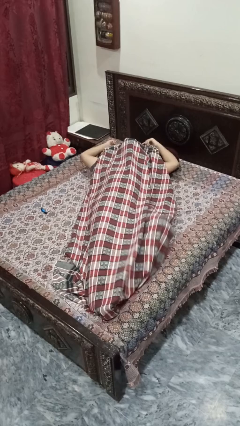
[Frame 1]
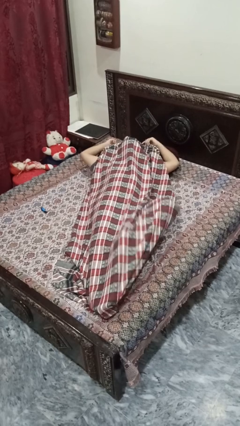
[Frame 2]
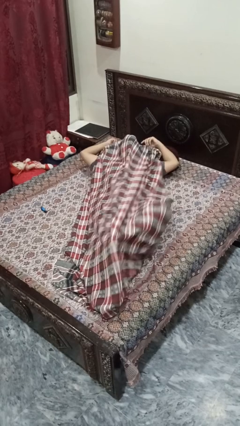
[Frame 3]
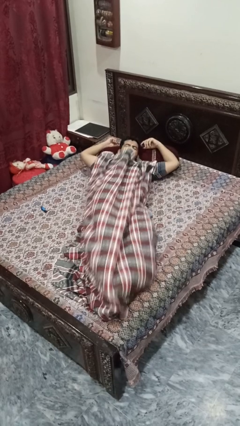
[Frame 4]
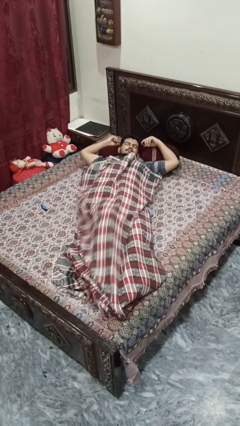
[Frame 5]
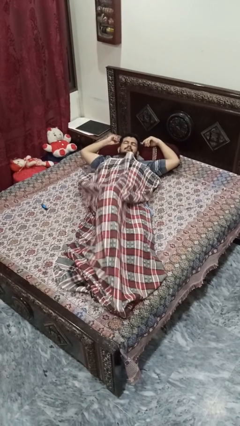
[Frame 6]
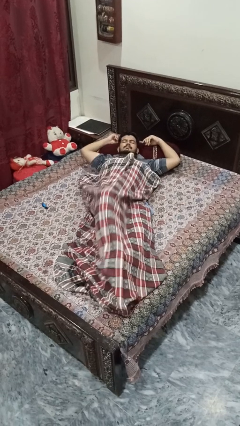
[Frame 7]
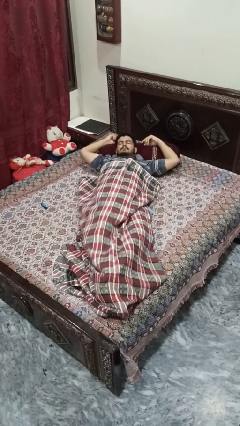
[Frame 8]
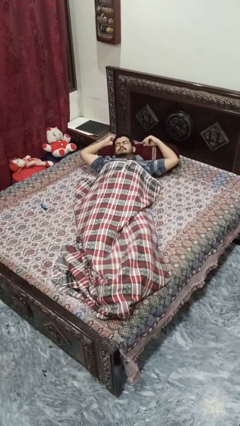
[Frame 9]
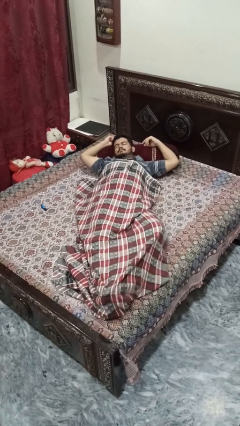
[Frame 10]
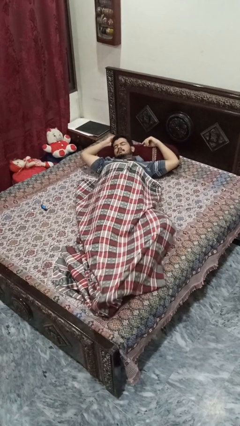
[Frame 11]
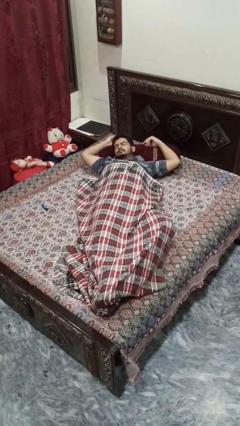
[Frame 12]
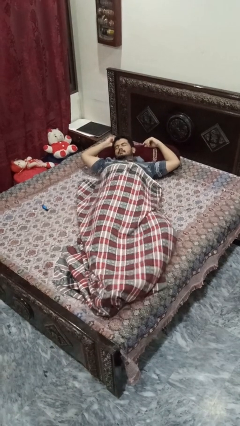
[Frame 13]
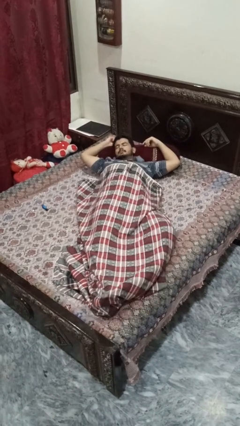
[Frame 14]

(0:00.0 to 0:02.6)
person uncovers with bedsheets

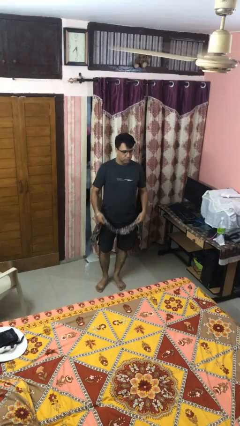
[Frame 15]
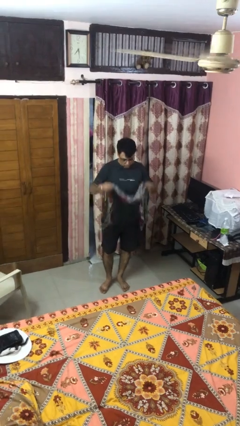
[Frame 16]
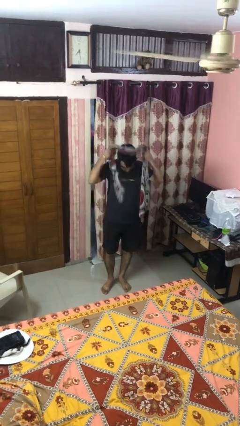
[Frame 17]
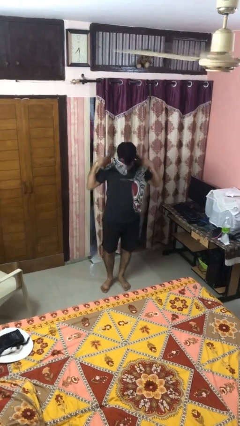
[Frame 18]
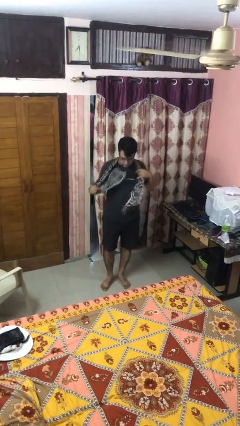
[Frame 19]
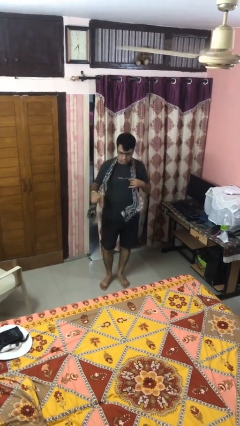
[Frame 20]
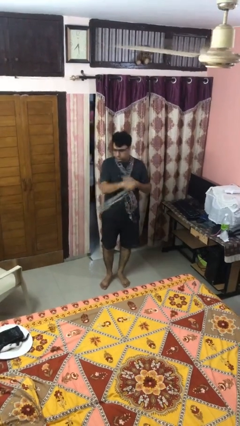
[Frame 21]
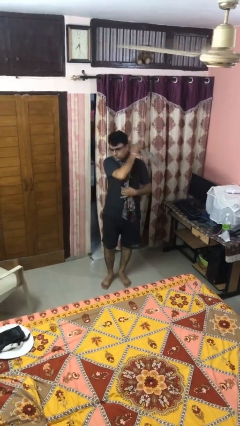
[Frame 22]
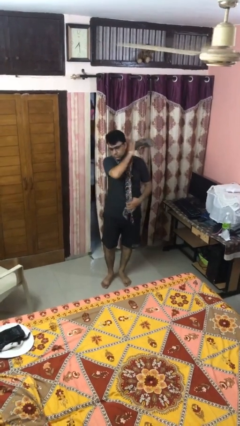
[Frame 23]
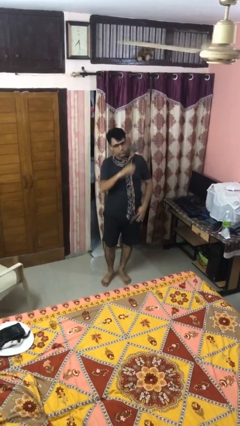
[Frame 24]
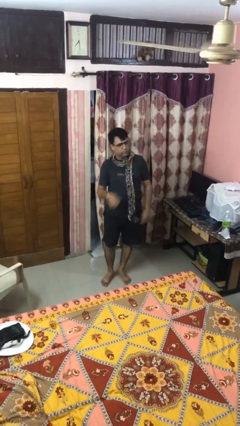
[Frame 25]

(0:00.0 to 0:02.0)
person puts on scarf

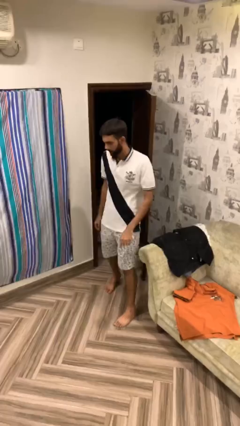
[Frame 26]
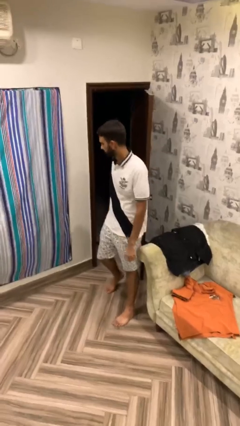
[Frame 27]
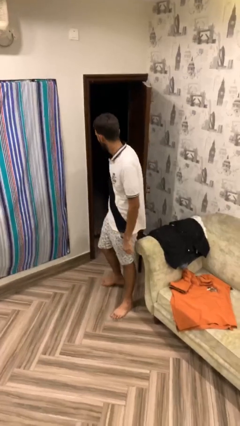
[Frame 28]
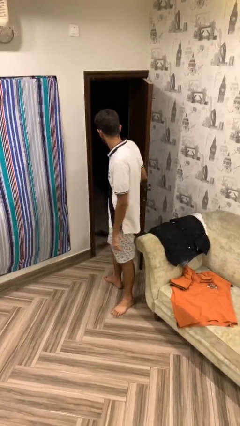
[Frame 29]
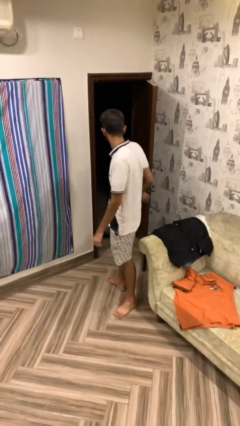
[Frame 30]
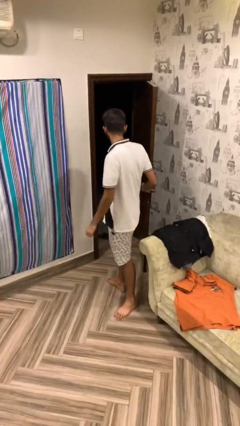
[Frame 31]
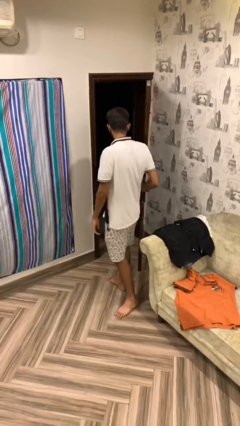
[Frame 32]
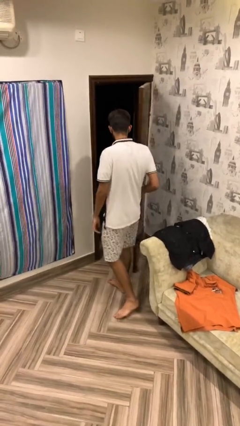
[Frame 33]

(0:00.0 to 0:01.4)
person closes facility door

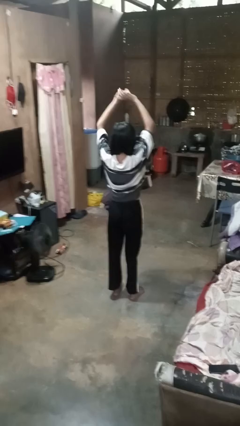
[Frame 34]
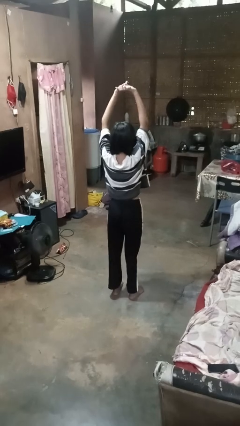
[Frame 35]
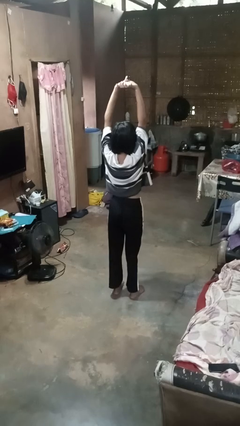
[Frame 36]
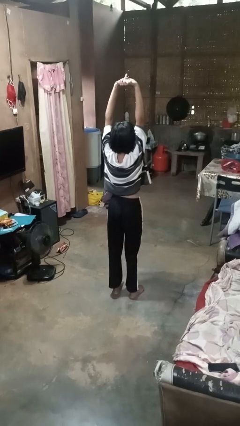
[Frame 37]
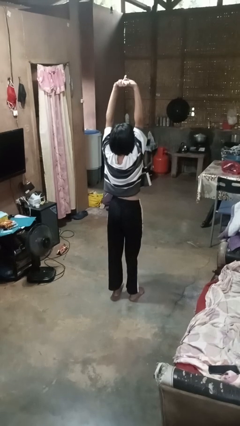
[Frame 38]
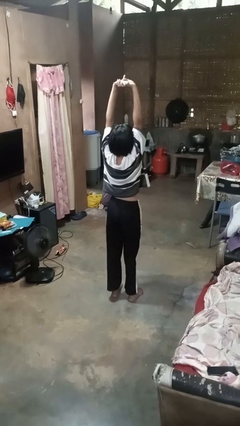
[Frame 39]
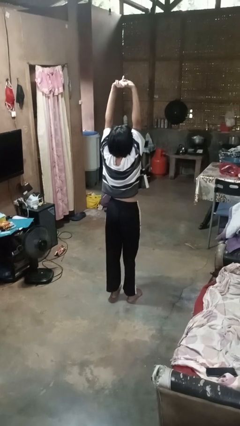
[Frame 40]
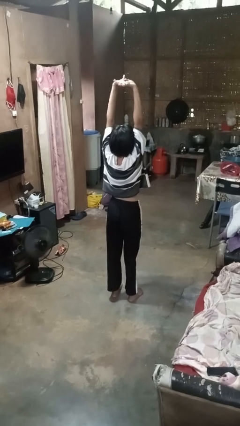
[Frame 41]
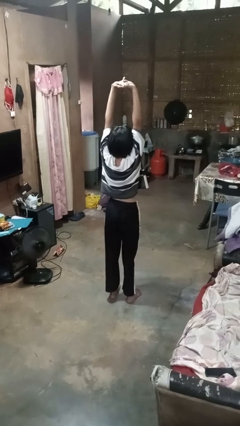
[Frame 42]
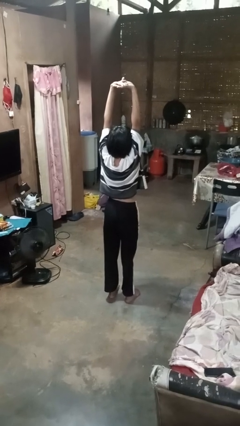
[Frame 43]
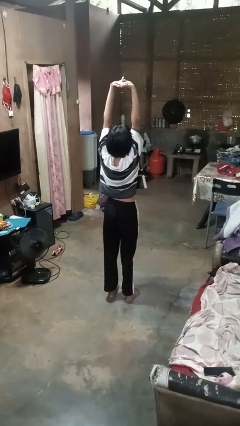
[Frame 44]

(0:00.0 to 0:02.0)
person stretches arms over head

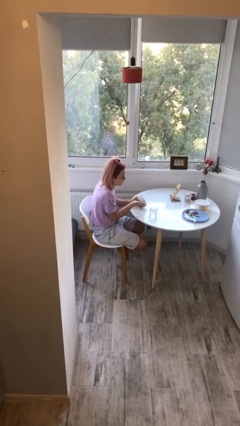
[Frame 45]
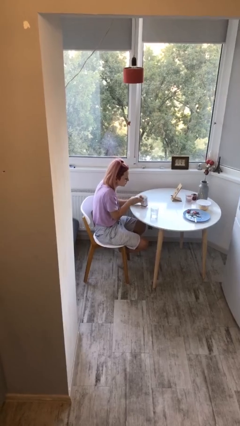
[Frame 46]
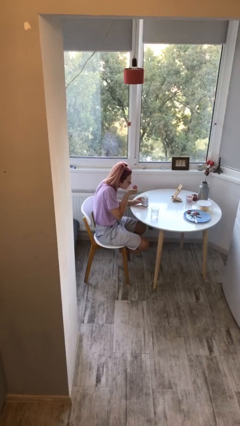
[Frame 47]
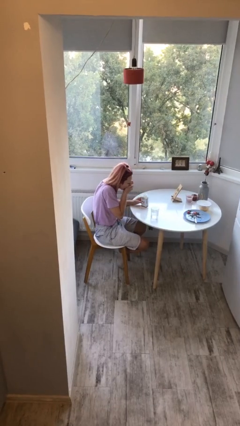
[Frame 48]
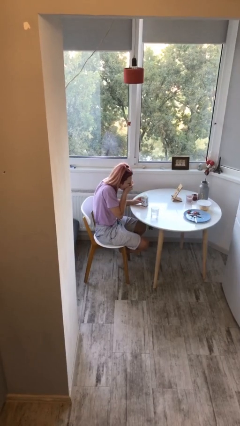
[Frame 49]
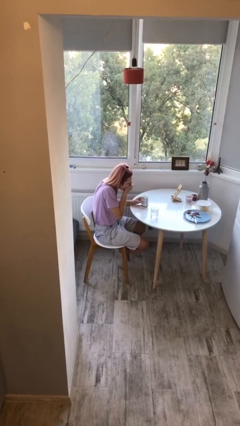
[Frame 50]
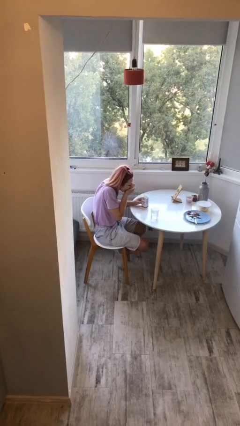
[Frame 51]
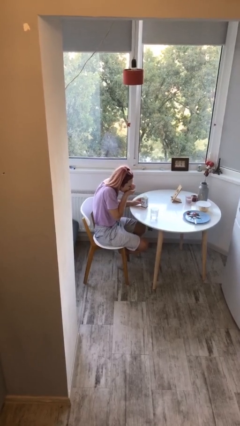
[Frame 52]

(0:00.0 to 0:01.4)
person takes medicine pills

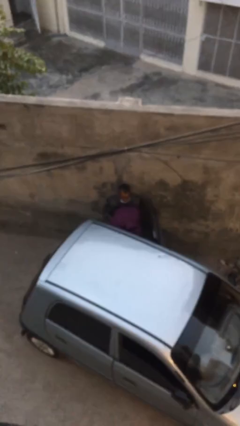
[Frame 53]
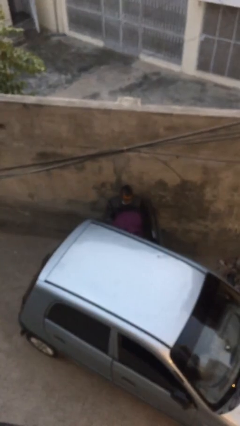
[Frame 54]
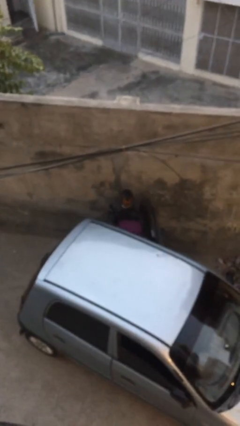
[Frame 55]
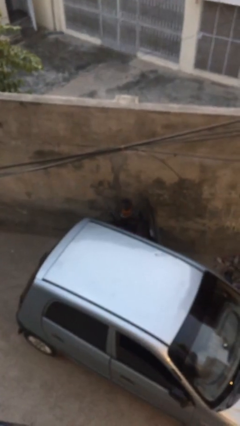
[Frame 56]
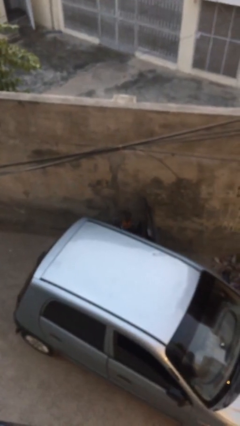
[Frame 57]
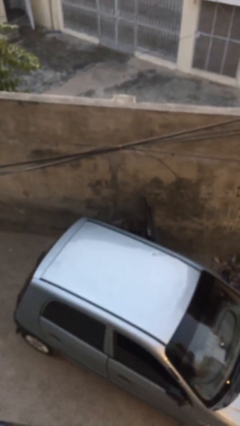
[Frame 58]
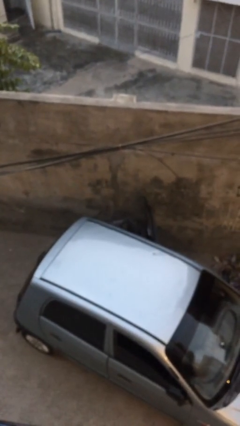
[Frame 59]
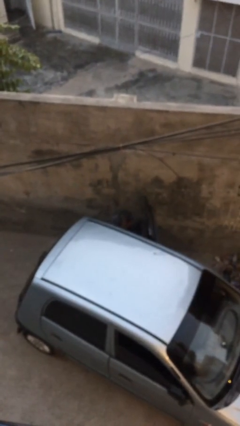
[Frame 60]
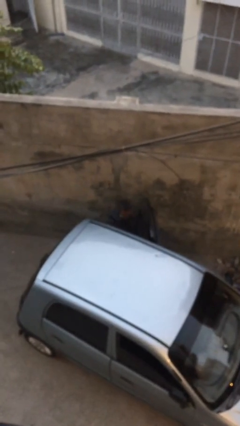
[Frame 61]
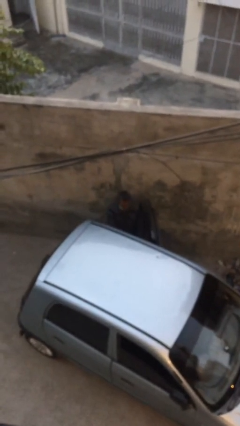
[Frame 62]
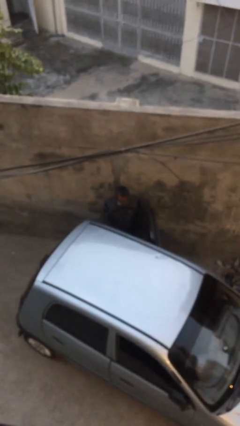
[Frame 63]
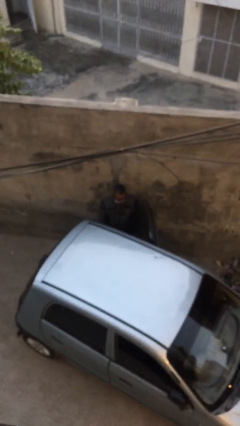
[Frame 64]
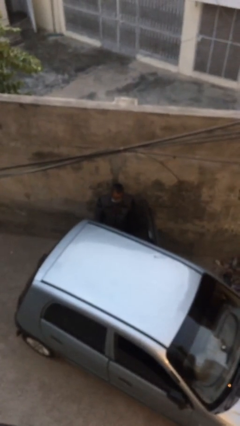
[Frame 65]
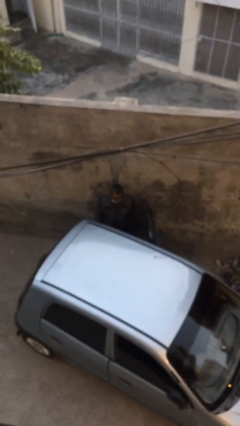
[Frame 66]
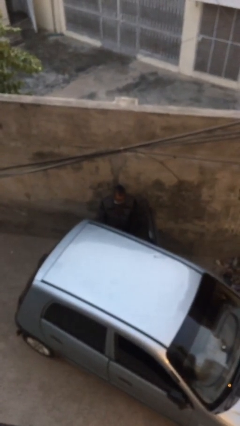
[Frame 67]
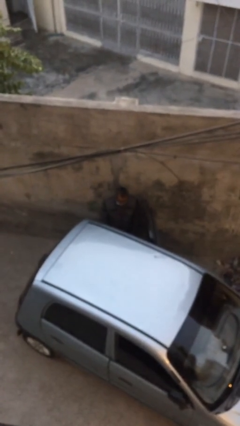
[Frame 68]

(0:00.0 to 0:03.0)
person loads car

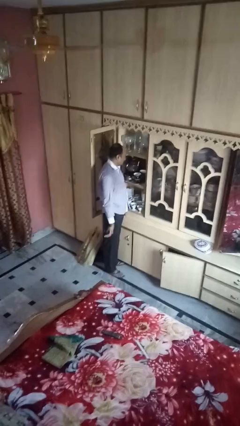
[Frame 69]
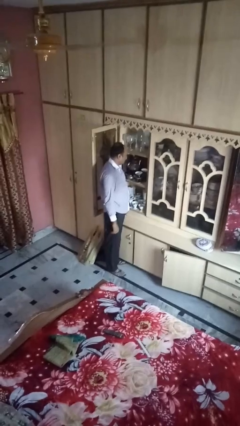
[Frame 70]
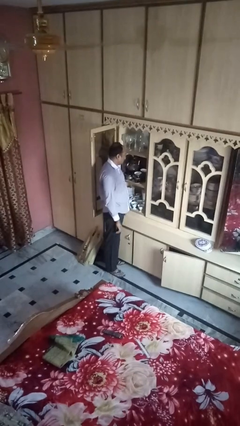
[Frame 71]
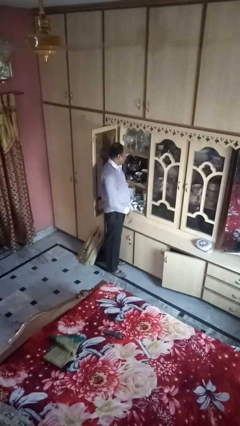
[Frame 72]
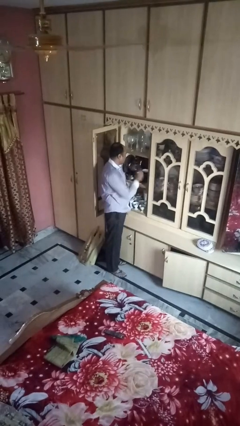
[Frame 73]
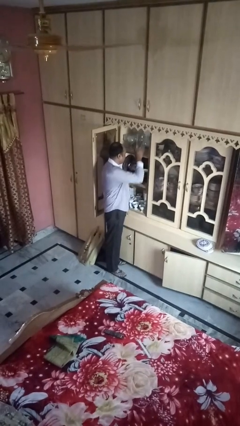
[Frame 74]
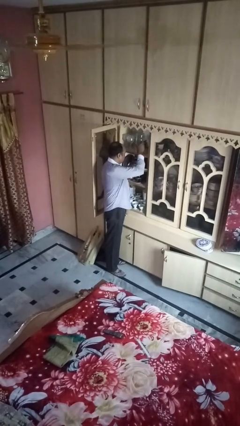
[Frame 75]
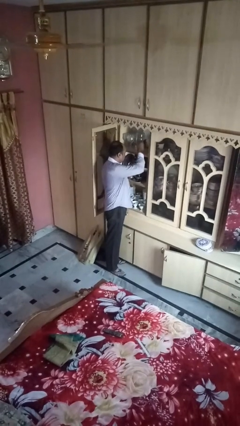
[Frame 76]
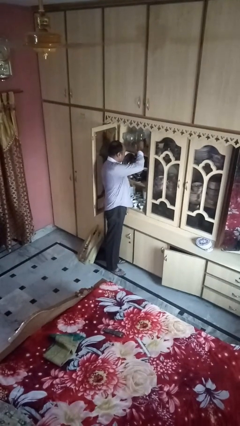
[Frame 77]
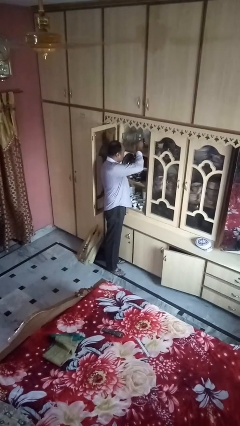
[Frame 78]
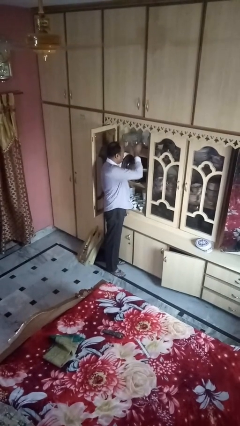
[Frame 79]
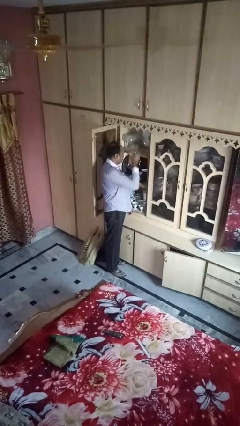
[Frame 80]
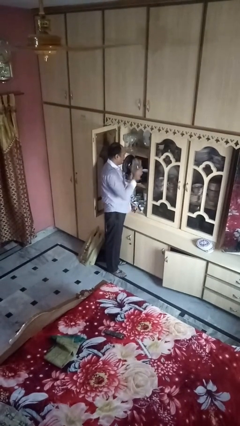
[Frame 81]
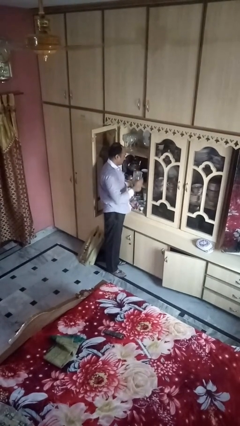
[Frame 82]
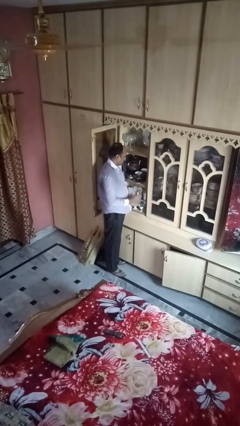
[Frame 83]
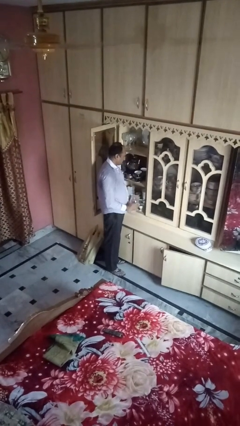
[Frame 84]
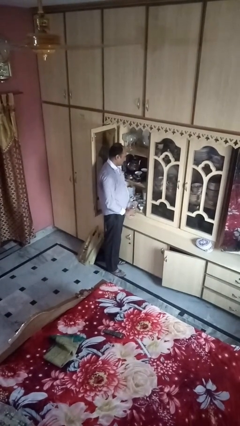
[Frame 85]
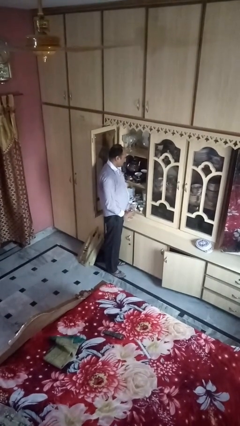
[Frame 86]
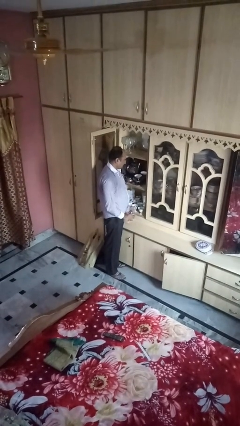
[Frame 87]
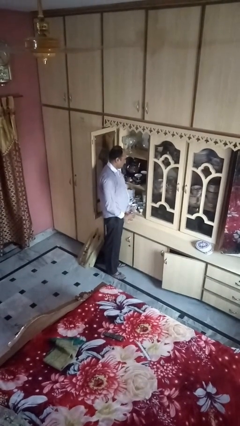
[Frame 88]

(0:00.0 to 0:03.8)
person picks up object from cabinet

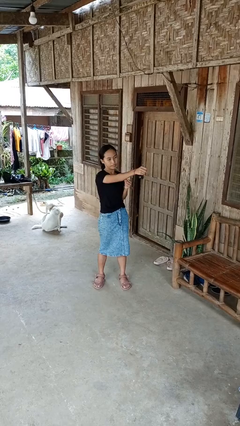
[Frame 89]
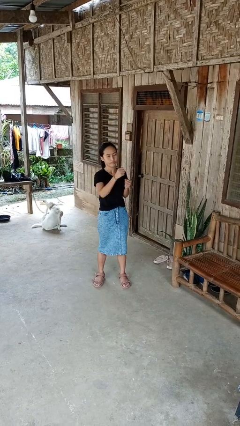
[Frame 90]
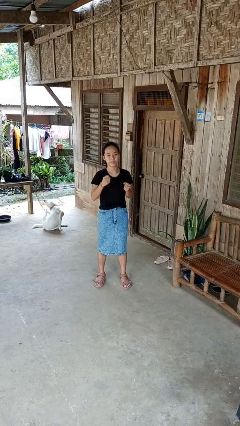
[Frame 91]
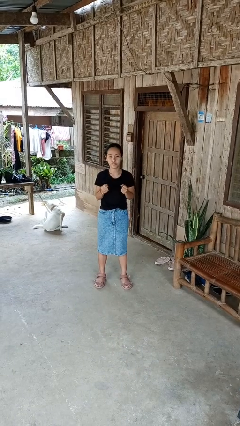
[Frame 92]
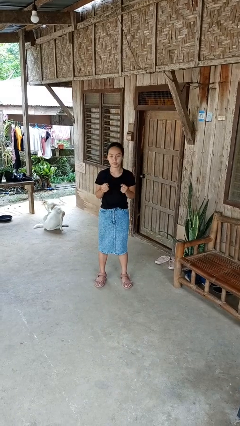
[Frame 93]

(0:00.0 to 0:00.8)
person punches
